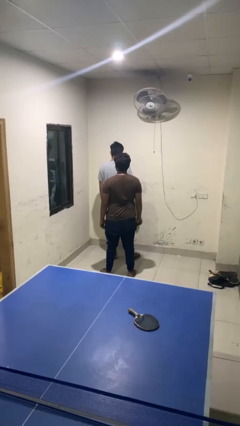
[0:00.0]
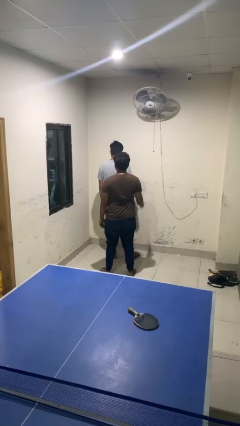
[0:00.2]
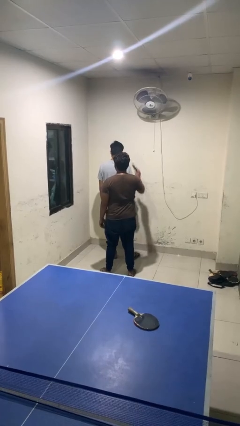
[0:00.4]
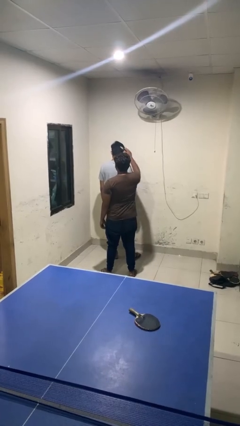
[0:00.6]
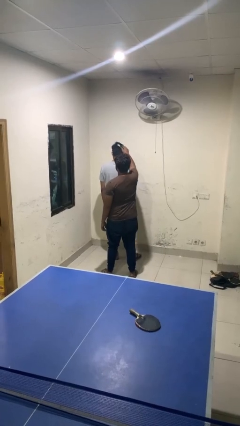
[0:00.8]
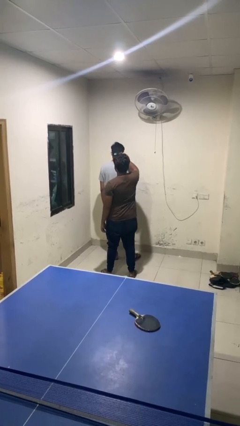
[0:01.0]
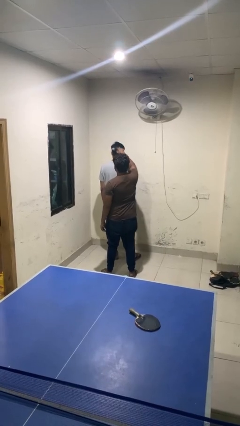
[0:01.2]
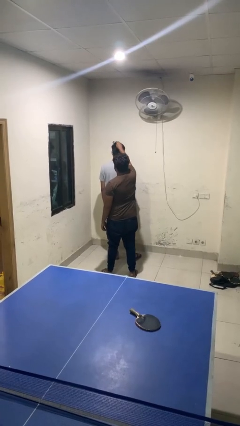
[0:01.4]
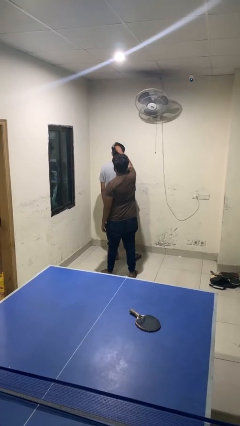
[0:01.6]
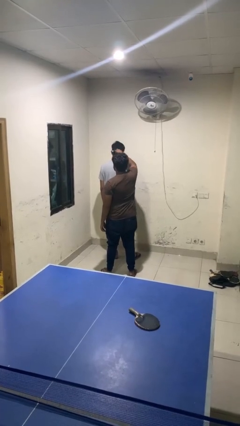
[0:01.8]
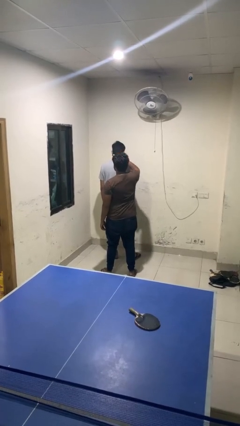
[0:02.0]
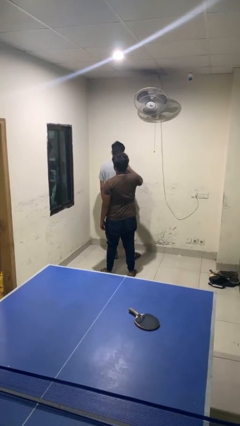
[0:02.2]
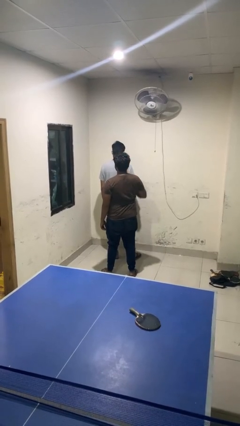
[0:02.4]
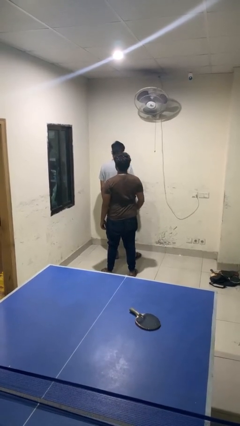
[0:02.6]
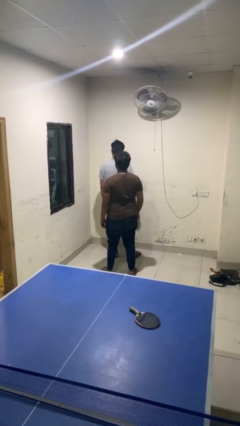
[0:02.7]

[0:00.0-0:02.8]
person brushes hair of person

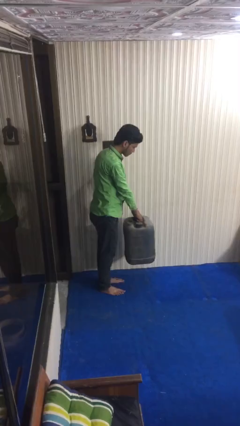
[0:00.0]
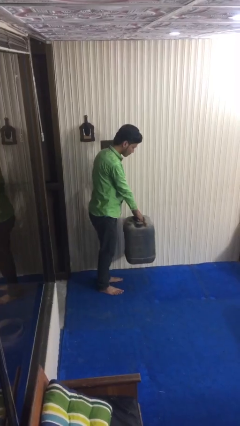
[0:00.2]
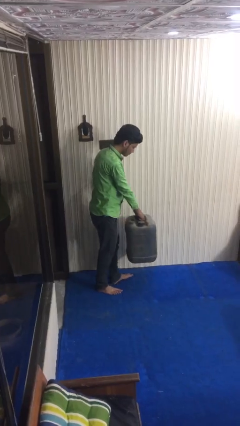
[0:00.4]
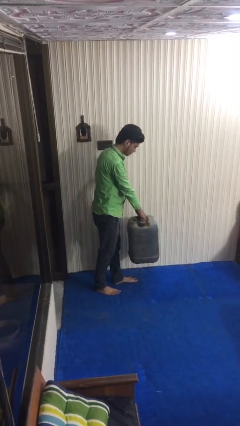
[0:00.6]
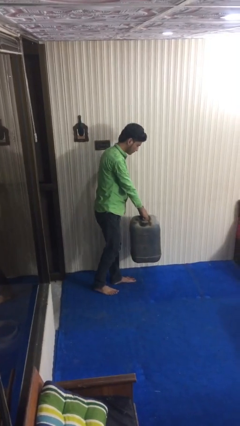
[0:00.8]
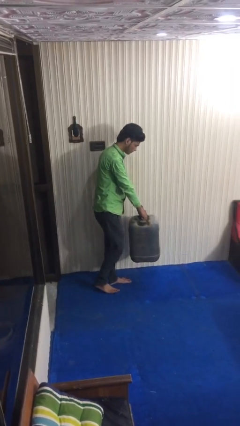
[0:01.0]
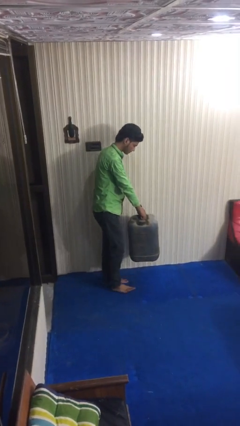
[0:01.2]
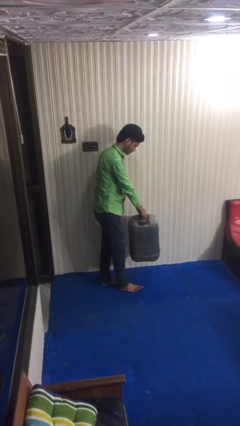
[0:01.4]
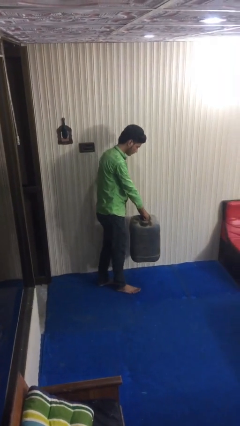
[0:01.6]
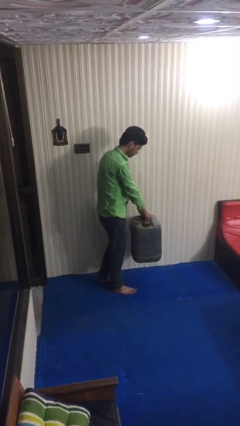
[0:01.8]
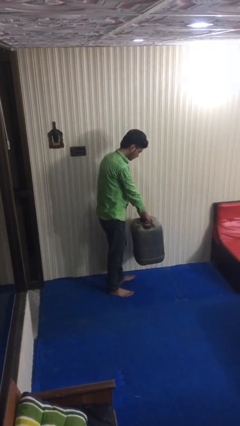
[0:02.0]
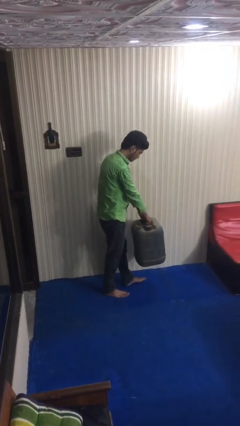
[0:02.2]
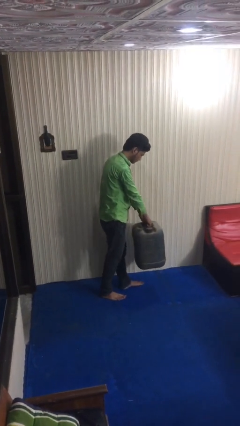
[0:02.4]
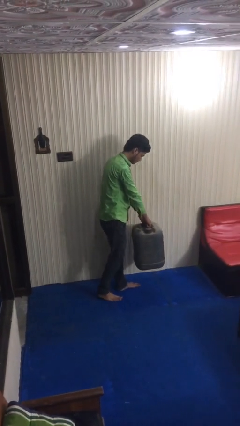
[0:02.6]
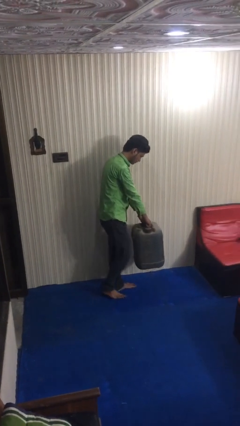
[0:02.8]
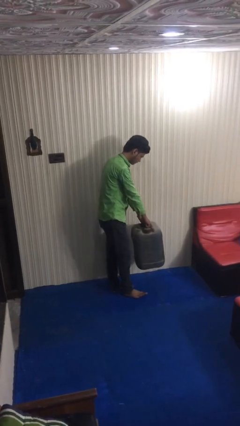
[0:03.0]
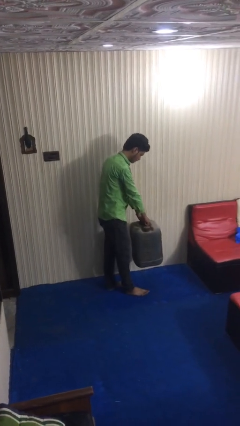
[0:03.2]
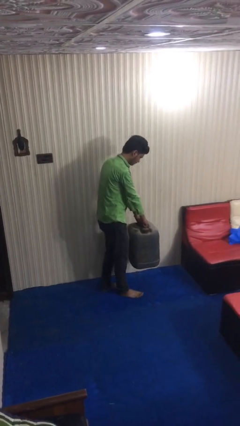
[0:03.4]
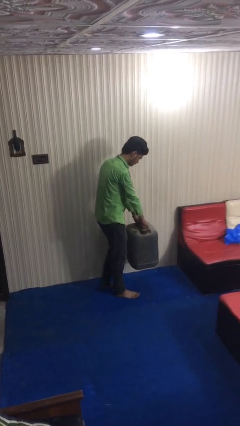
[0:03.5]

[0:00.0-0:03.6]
person carries heavy object

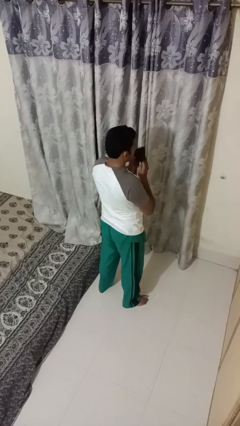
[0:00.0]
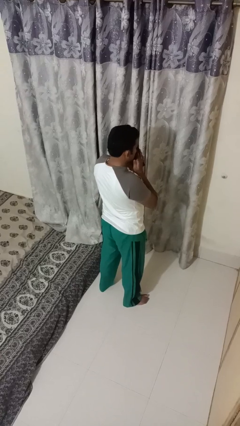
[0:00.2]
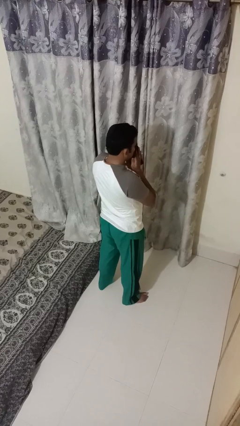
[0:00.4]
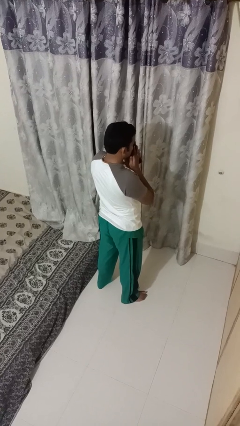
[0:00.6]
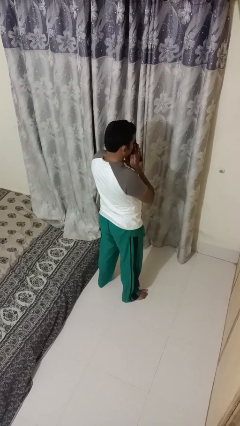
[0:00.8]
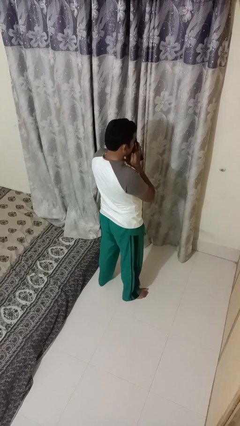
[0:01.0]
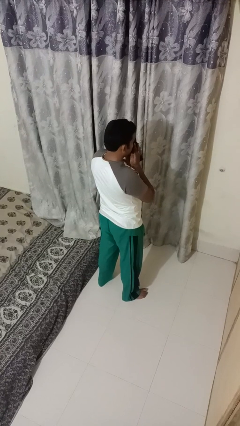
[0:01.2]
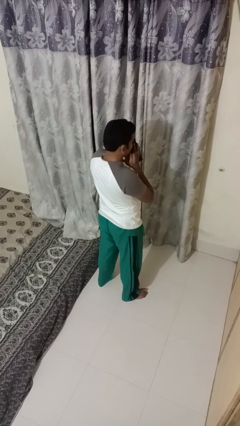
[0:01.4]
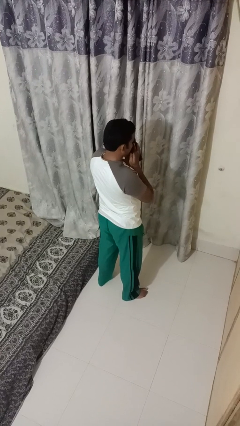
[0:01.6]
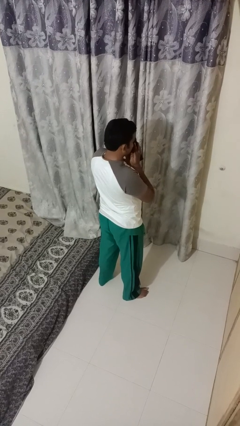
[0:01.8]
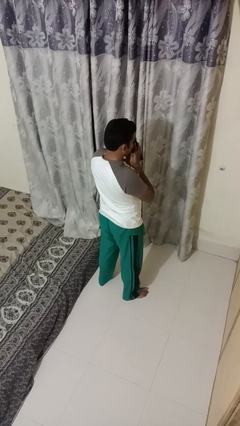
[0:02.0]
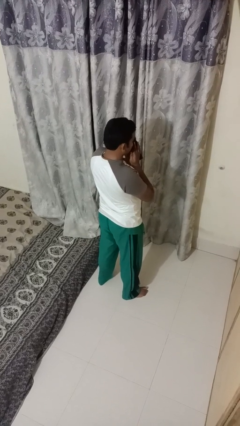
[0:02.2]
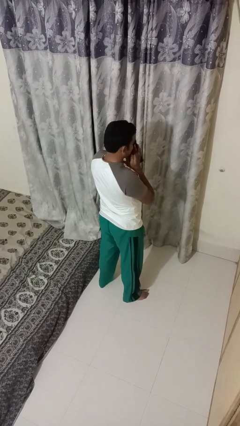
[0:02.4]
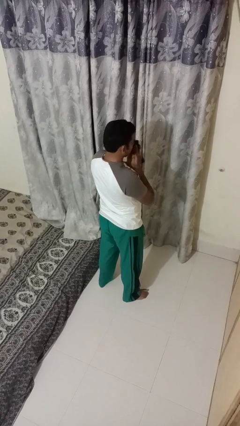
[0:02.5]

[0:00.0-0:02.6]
person blows nose

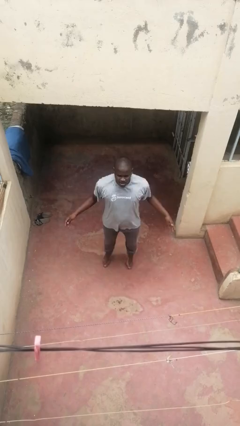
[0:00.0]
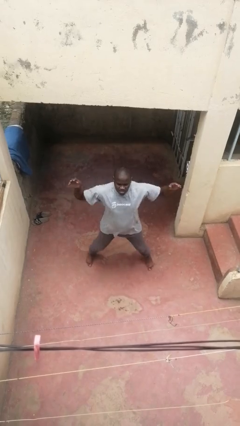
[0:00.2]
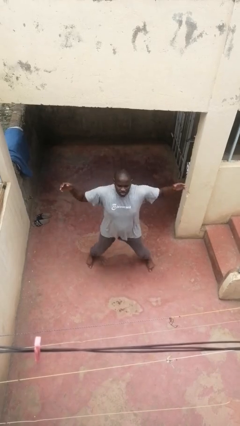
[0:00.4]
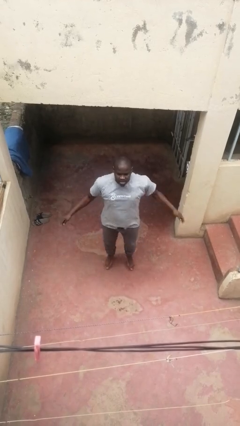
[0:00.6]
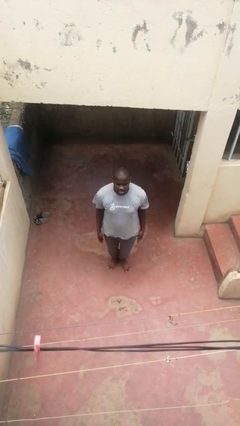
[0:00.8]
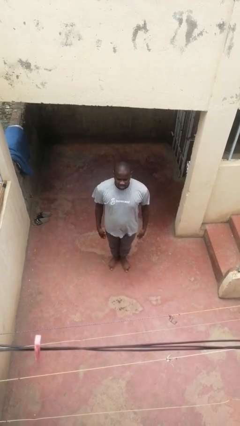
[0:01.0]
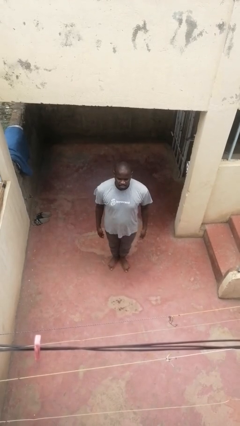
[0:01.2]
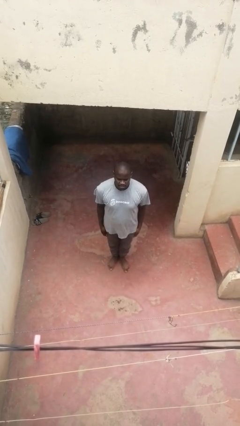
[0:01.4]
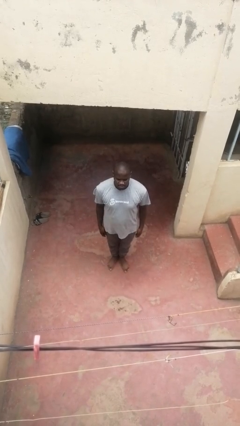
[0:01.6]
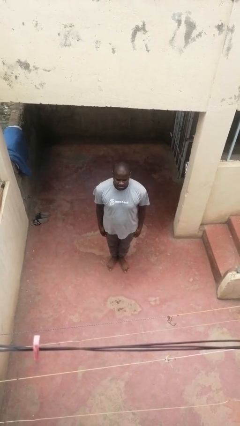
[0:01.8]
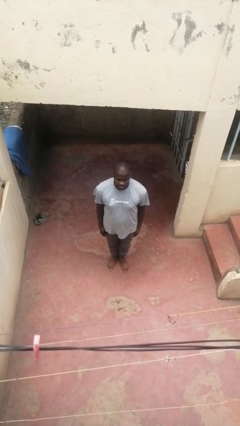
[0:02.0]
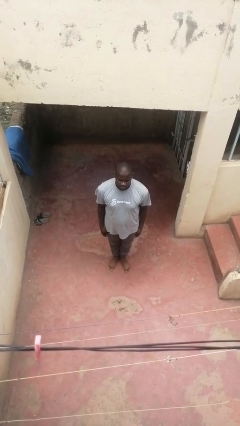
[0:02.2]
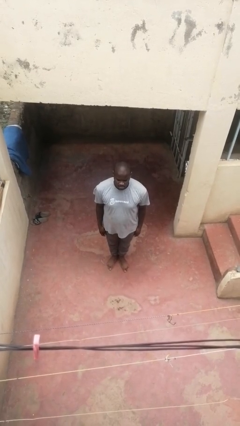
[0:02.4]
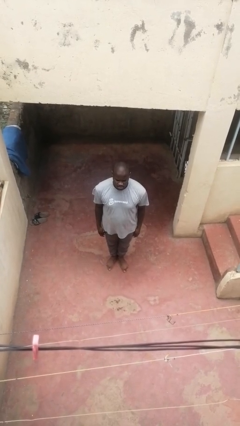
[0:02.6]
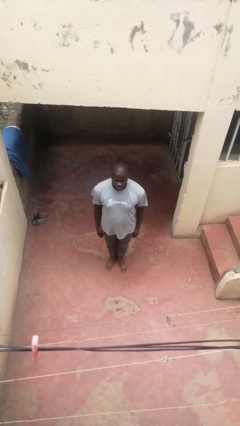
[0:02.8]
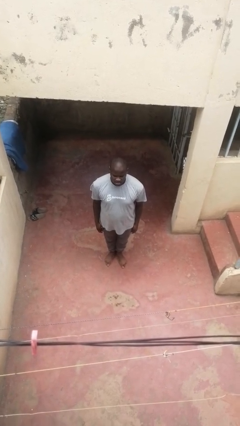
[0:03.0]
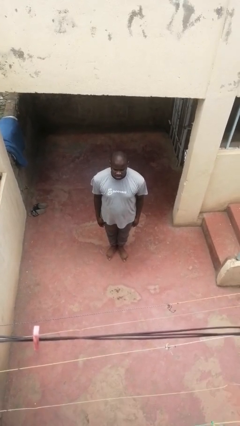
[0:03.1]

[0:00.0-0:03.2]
person exercises with jumping jacks

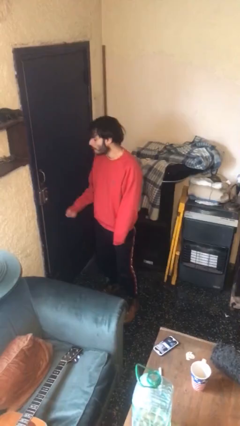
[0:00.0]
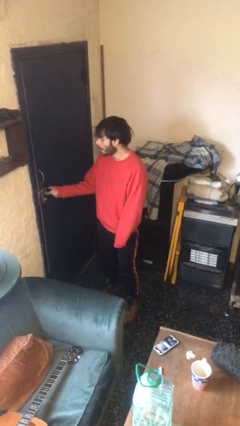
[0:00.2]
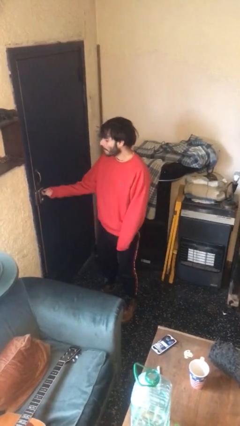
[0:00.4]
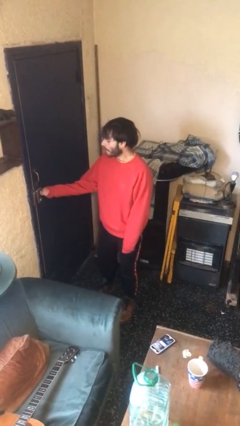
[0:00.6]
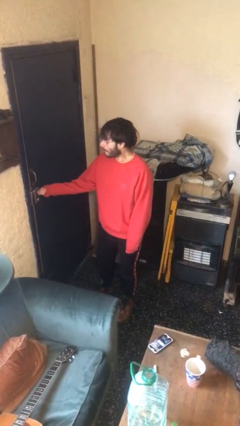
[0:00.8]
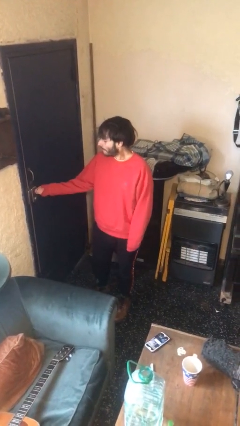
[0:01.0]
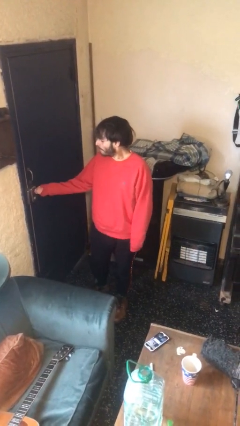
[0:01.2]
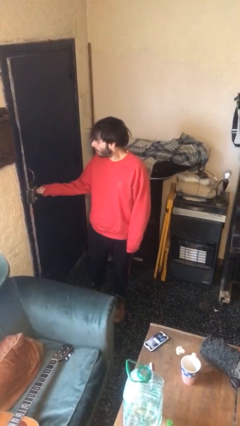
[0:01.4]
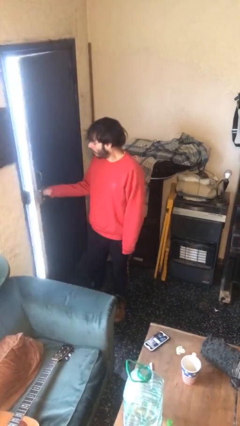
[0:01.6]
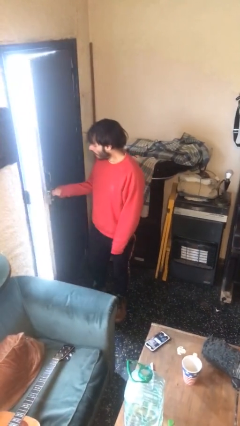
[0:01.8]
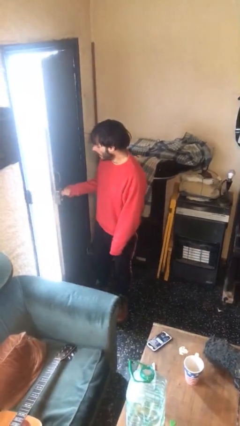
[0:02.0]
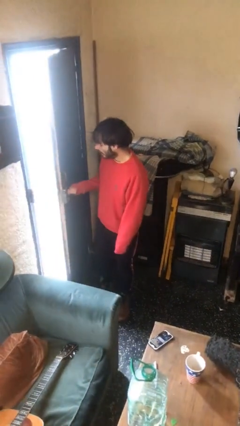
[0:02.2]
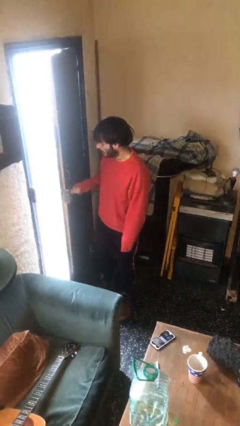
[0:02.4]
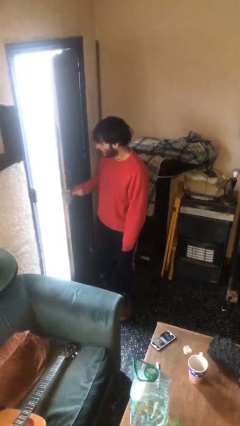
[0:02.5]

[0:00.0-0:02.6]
person opens facility door

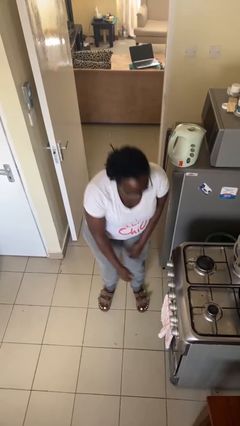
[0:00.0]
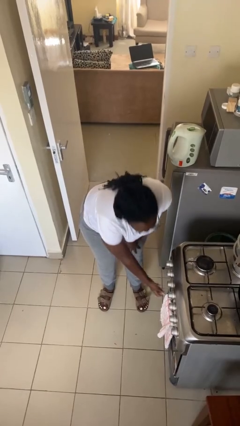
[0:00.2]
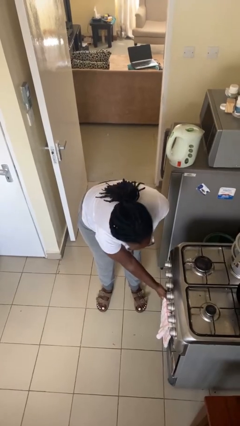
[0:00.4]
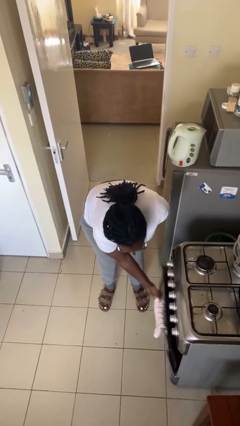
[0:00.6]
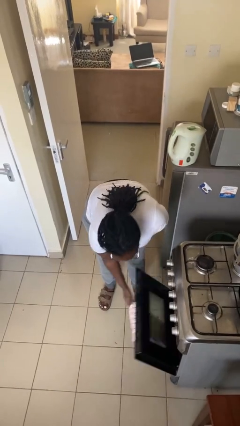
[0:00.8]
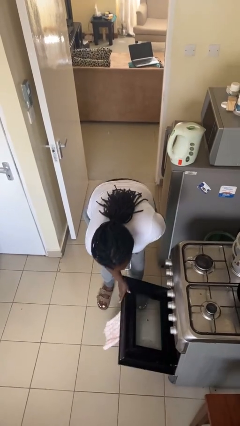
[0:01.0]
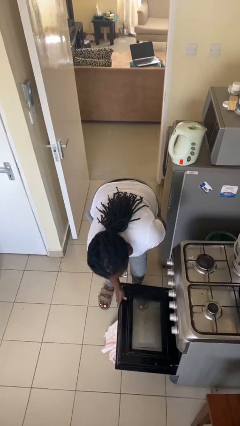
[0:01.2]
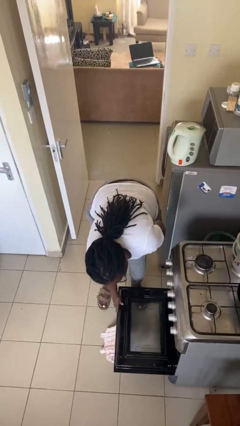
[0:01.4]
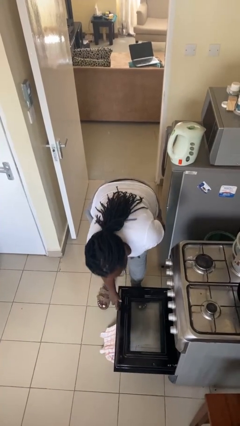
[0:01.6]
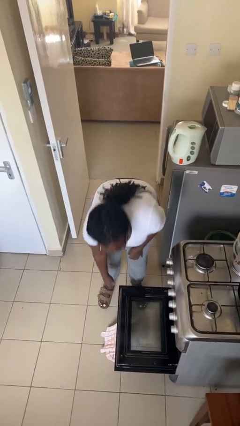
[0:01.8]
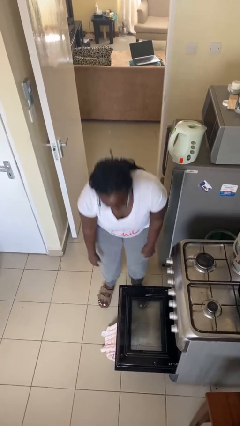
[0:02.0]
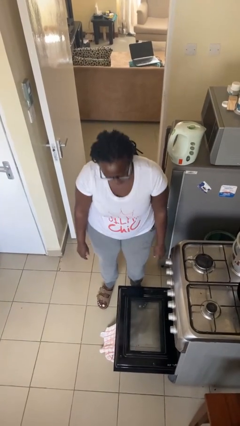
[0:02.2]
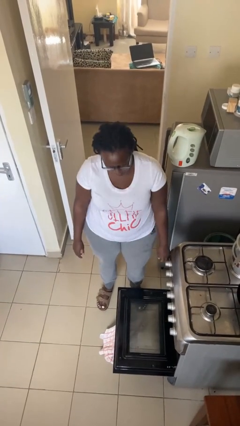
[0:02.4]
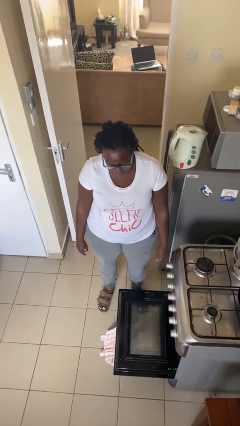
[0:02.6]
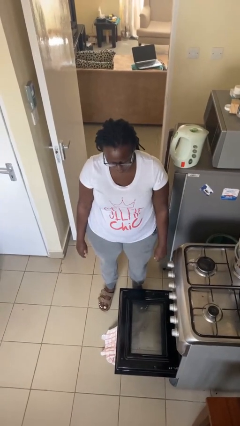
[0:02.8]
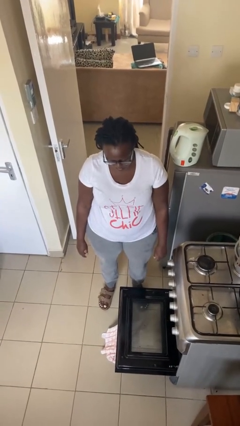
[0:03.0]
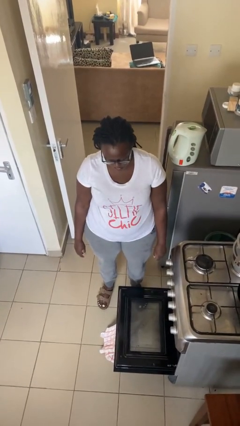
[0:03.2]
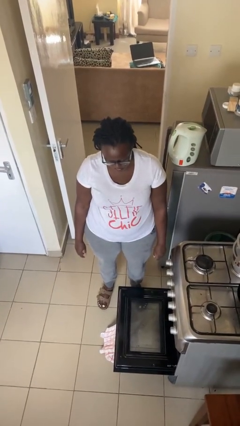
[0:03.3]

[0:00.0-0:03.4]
person opens oven door
